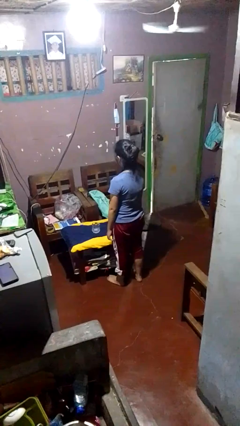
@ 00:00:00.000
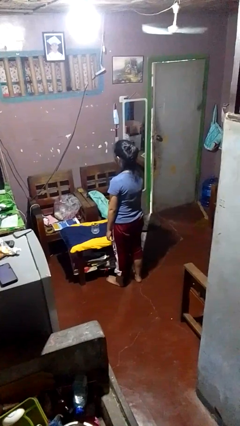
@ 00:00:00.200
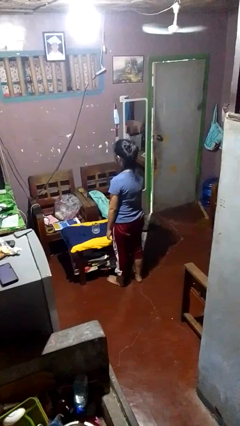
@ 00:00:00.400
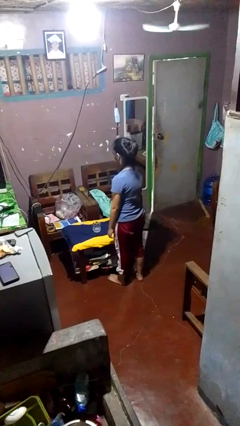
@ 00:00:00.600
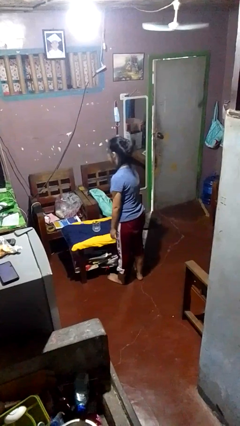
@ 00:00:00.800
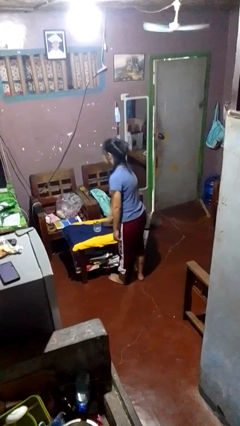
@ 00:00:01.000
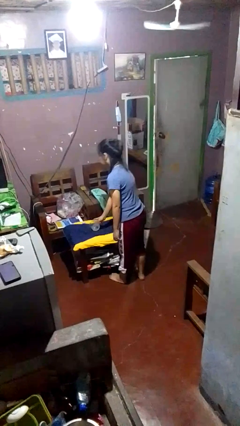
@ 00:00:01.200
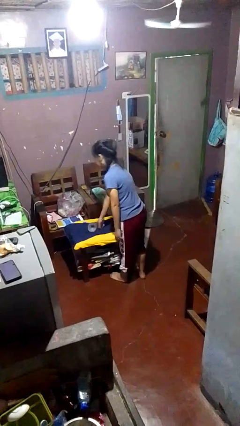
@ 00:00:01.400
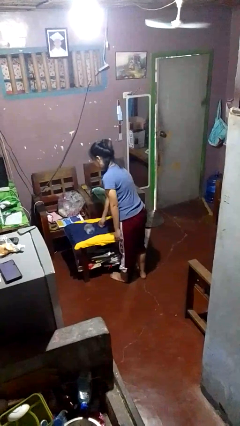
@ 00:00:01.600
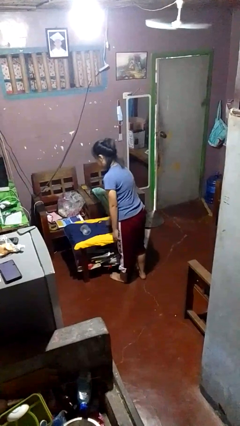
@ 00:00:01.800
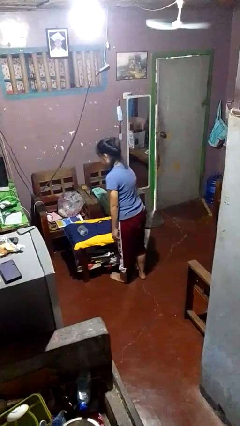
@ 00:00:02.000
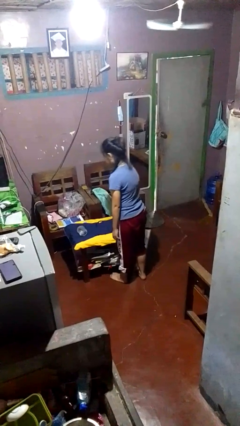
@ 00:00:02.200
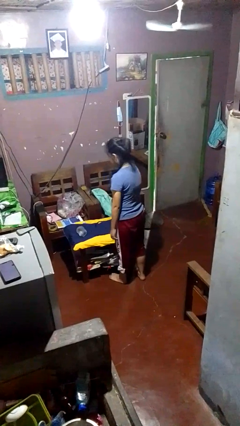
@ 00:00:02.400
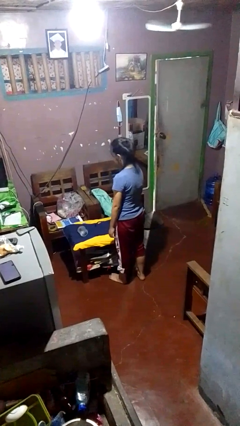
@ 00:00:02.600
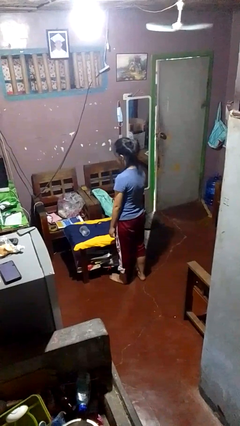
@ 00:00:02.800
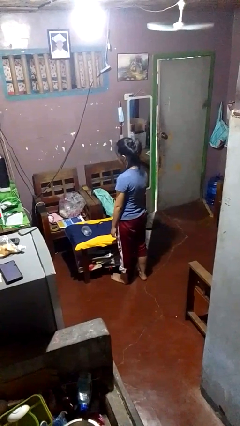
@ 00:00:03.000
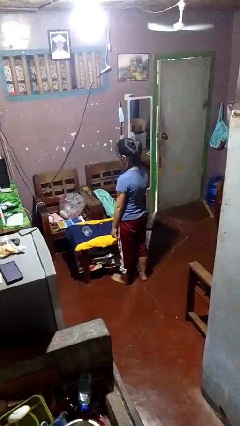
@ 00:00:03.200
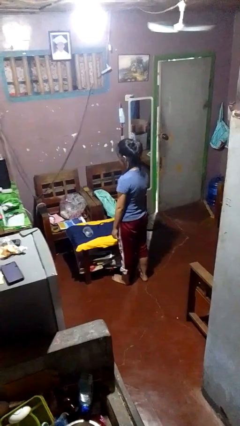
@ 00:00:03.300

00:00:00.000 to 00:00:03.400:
person knocks over glass

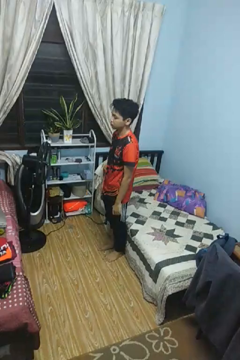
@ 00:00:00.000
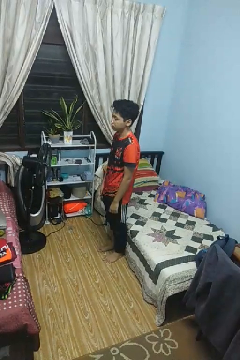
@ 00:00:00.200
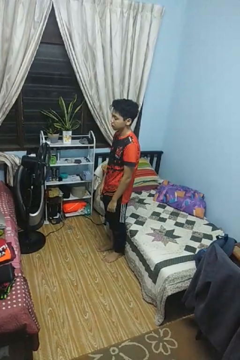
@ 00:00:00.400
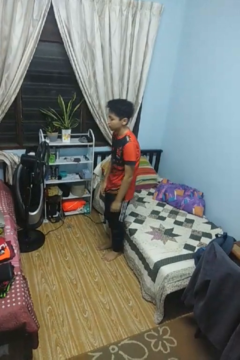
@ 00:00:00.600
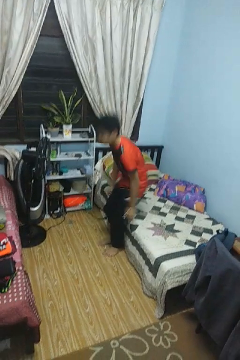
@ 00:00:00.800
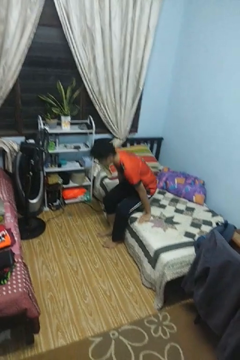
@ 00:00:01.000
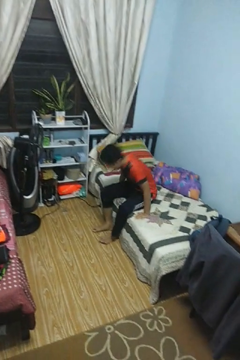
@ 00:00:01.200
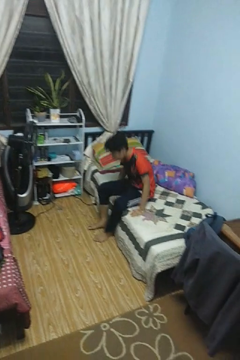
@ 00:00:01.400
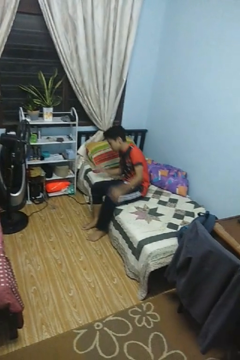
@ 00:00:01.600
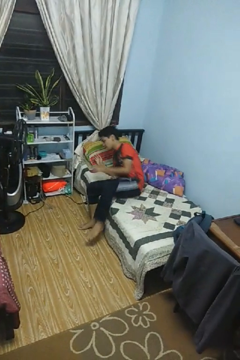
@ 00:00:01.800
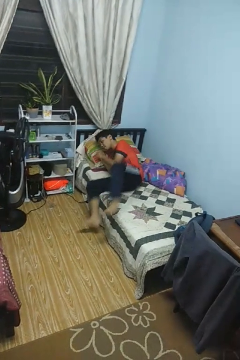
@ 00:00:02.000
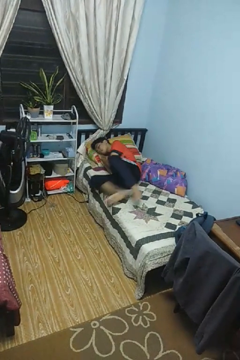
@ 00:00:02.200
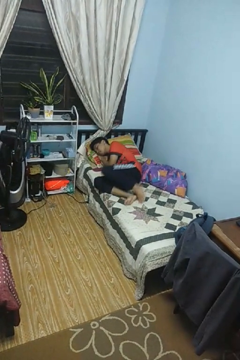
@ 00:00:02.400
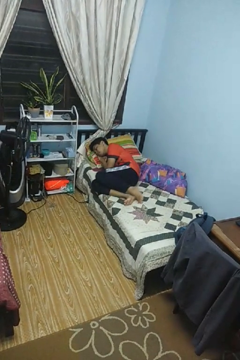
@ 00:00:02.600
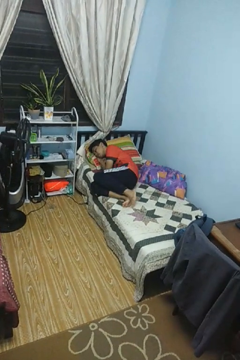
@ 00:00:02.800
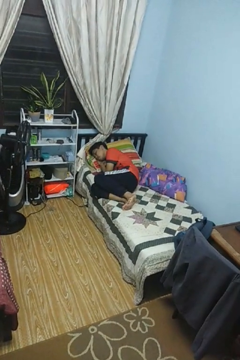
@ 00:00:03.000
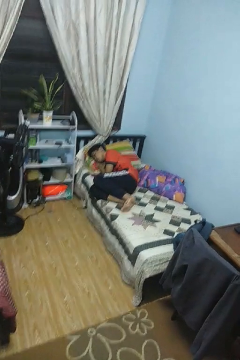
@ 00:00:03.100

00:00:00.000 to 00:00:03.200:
person lies down on bed

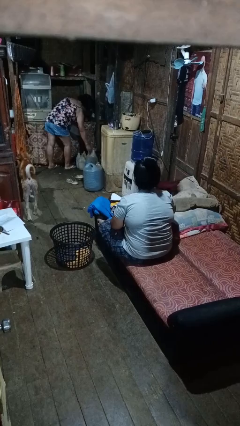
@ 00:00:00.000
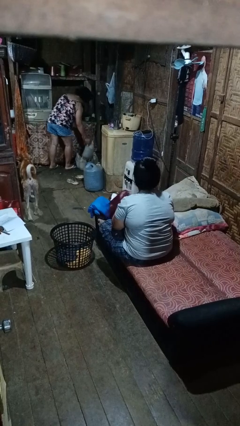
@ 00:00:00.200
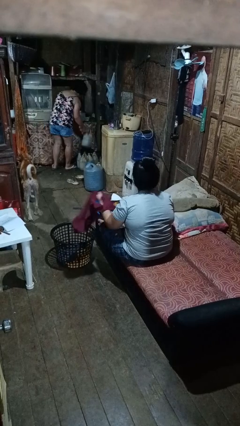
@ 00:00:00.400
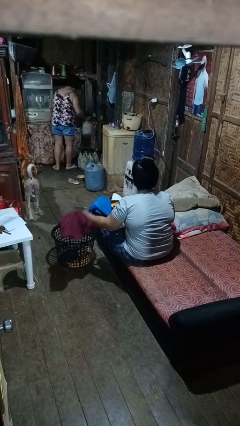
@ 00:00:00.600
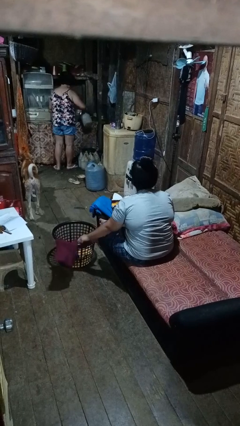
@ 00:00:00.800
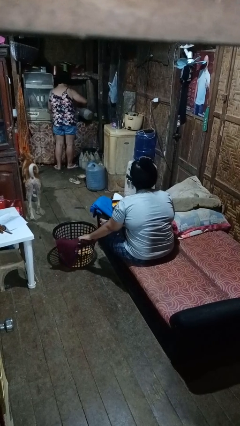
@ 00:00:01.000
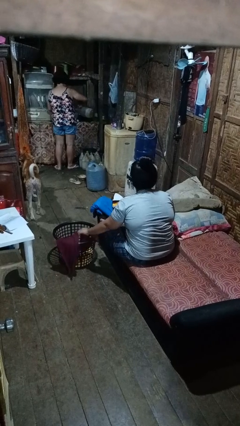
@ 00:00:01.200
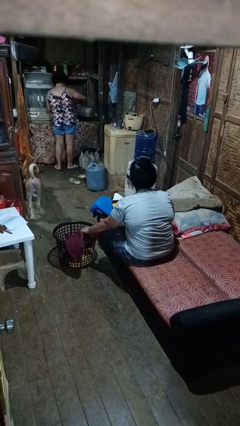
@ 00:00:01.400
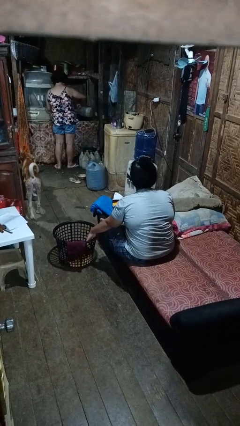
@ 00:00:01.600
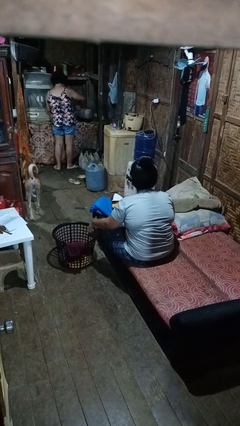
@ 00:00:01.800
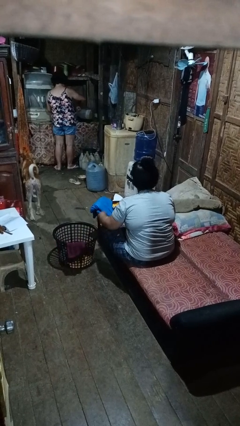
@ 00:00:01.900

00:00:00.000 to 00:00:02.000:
person puts object into basket

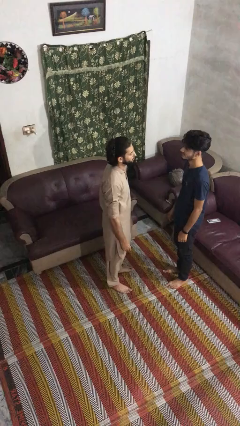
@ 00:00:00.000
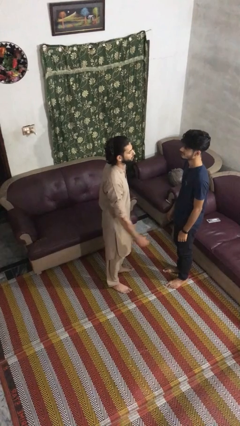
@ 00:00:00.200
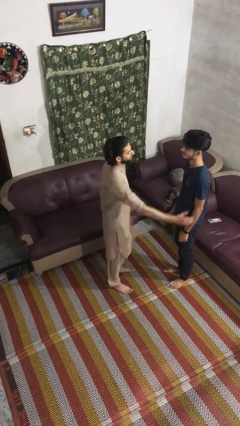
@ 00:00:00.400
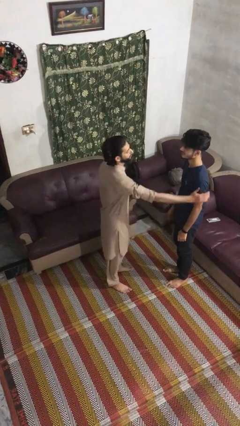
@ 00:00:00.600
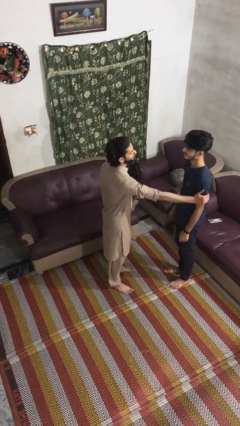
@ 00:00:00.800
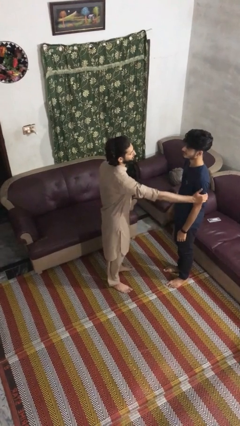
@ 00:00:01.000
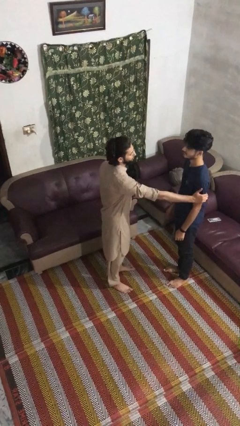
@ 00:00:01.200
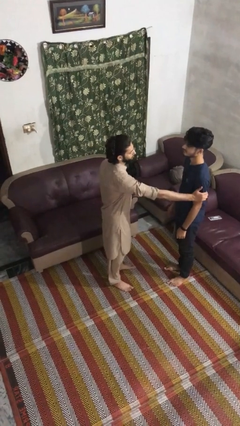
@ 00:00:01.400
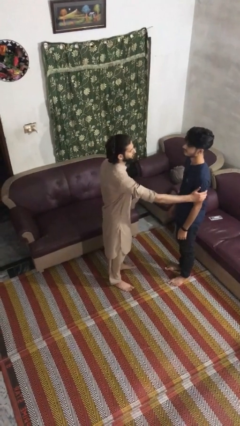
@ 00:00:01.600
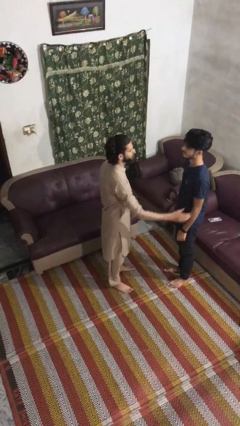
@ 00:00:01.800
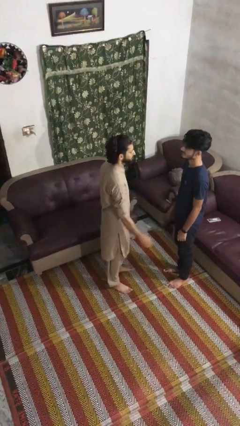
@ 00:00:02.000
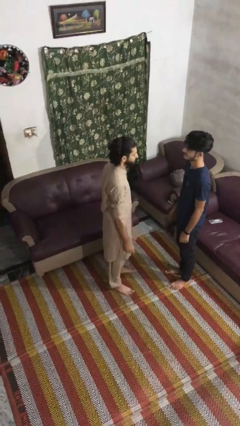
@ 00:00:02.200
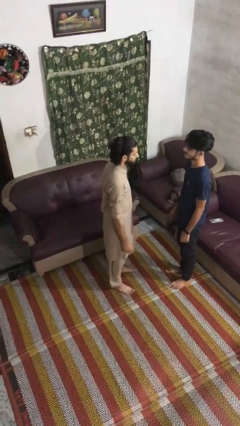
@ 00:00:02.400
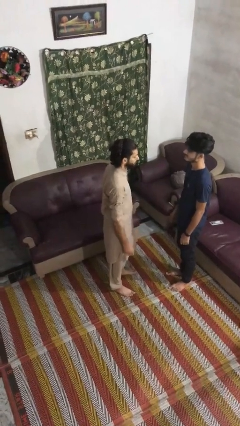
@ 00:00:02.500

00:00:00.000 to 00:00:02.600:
person grabs person by bicep

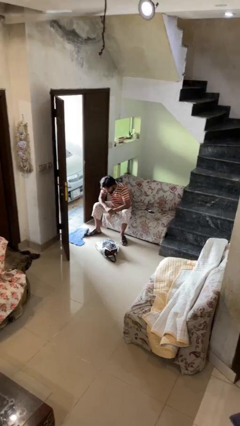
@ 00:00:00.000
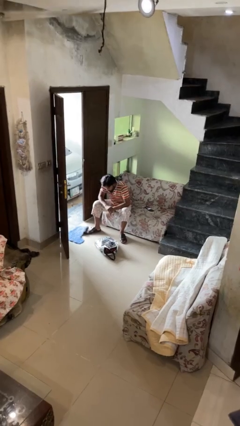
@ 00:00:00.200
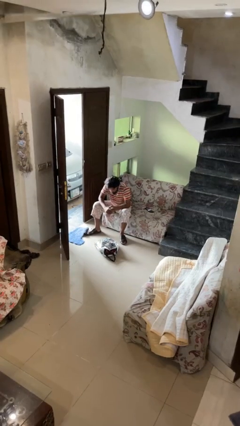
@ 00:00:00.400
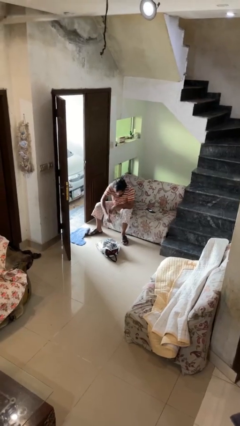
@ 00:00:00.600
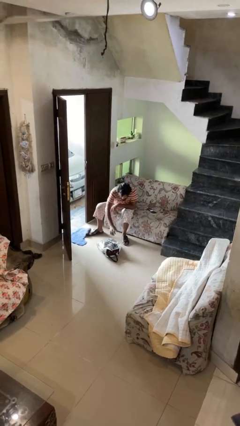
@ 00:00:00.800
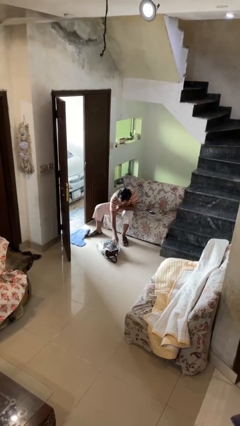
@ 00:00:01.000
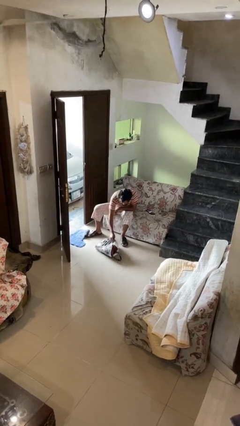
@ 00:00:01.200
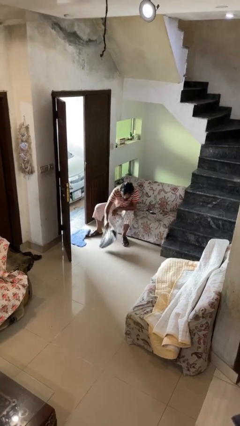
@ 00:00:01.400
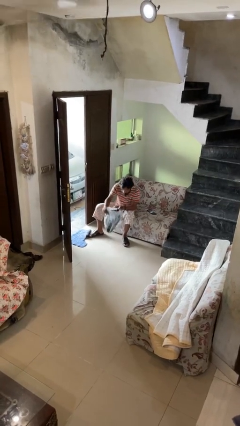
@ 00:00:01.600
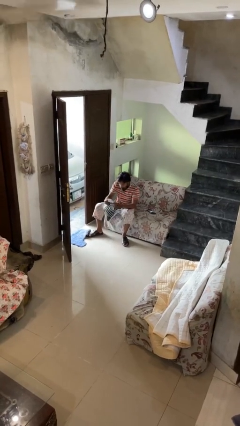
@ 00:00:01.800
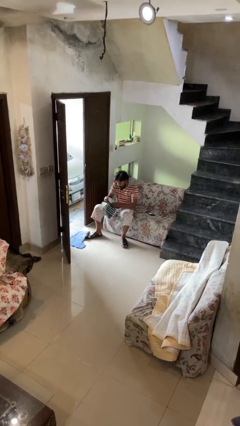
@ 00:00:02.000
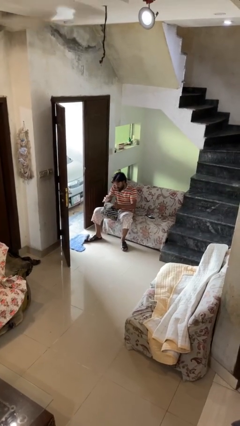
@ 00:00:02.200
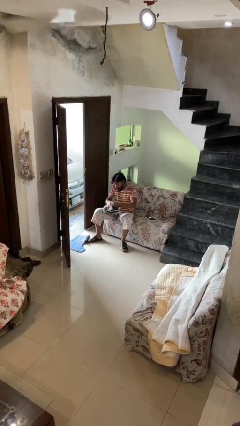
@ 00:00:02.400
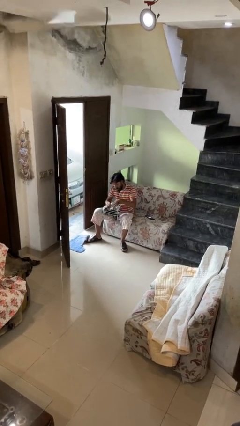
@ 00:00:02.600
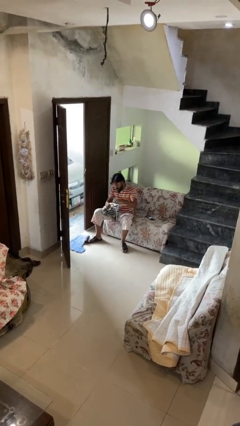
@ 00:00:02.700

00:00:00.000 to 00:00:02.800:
person picks up object from floor

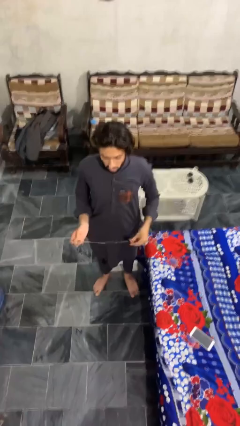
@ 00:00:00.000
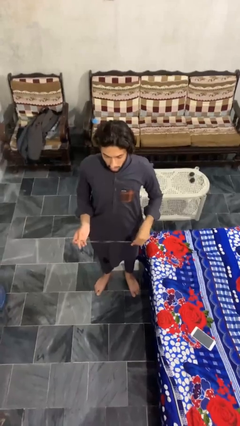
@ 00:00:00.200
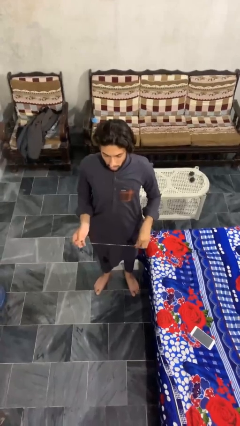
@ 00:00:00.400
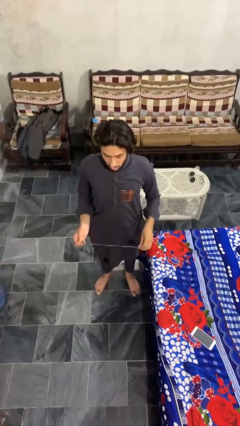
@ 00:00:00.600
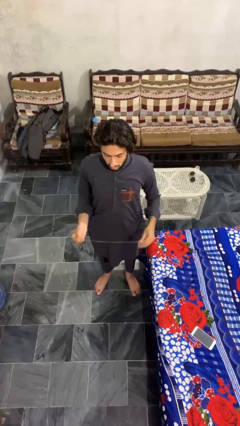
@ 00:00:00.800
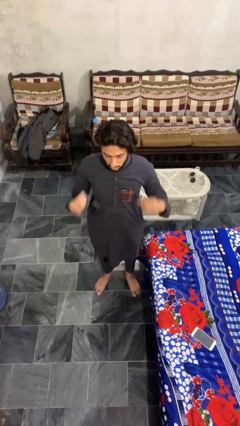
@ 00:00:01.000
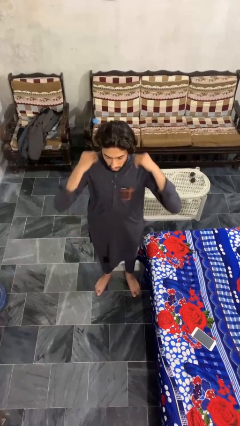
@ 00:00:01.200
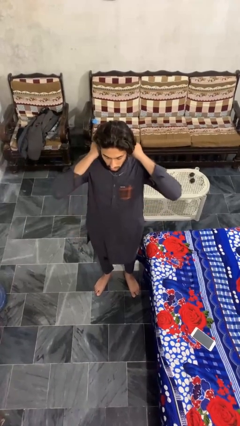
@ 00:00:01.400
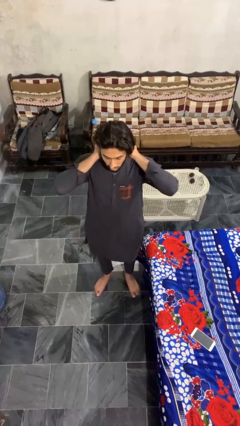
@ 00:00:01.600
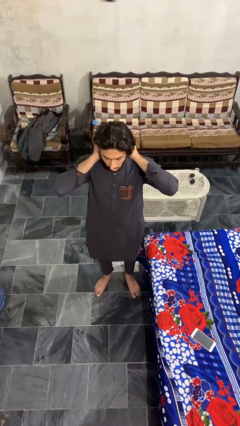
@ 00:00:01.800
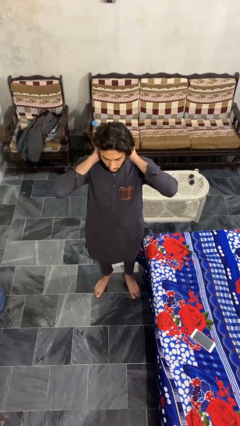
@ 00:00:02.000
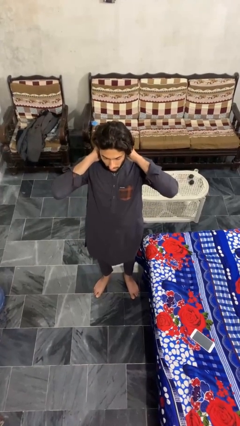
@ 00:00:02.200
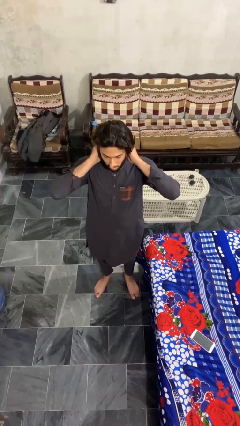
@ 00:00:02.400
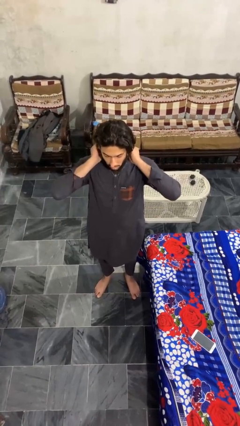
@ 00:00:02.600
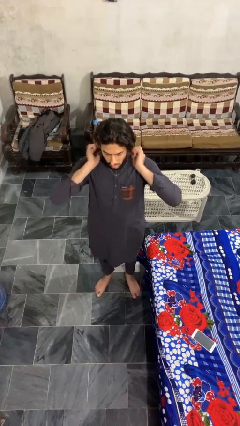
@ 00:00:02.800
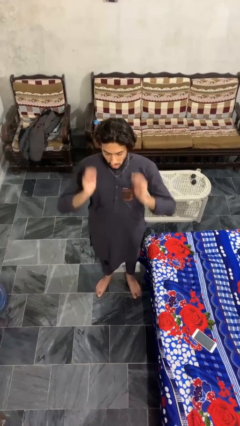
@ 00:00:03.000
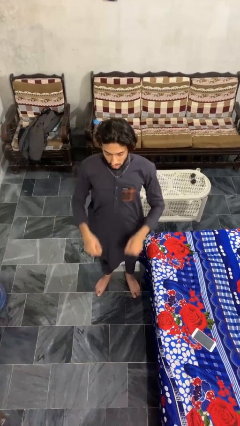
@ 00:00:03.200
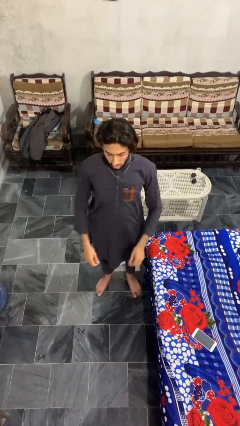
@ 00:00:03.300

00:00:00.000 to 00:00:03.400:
person puts on necklace
